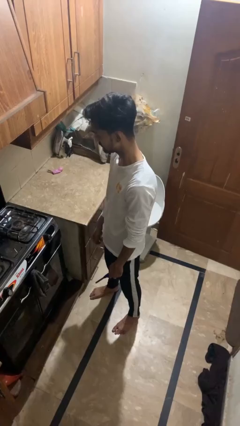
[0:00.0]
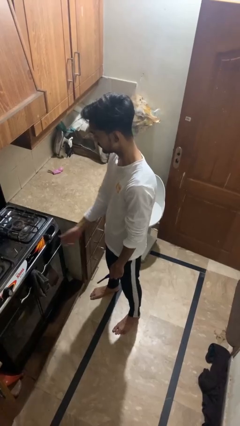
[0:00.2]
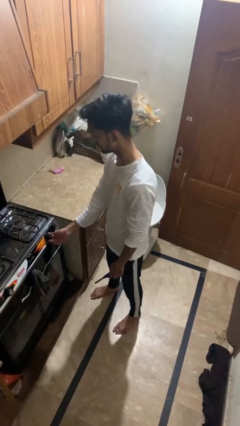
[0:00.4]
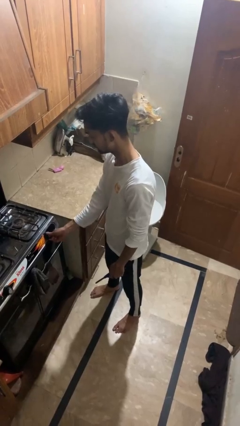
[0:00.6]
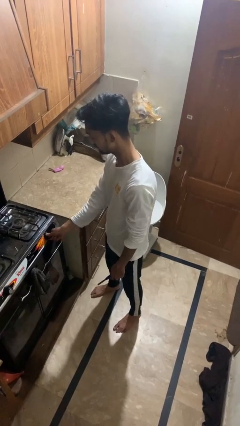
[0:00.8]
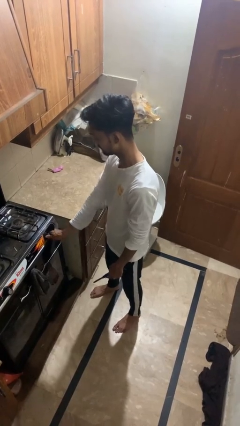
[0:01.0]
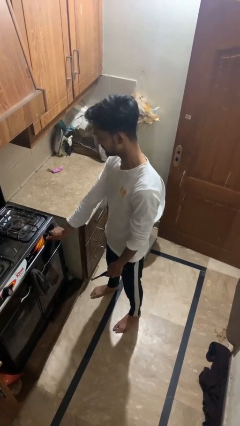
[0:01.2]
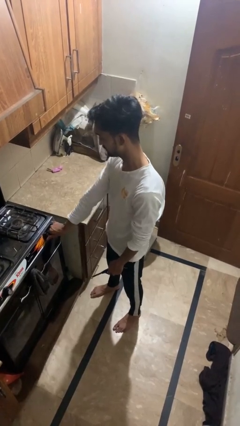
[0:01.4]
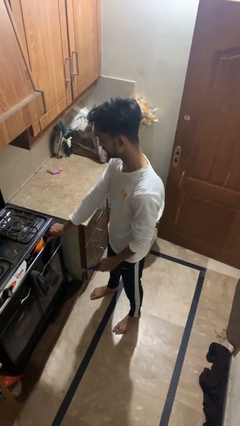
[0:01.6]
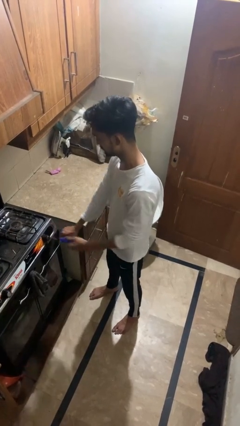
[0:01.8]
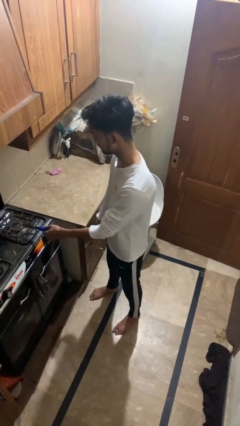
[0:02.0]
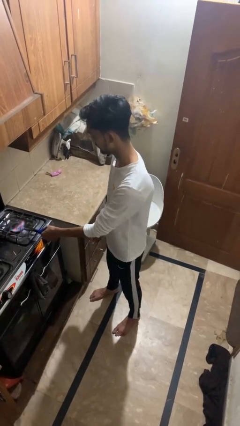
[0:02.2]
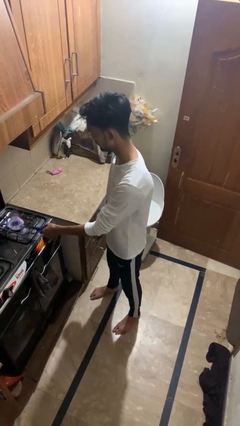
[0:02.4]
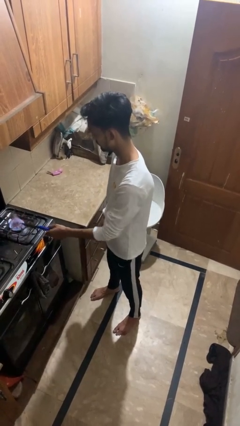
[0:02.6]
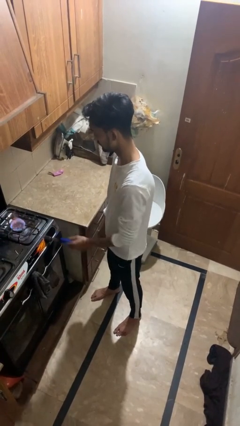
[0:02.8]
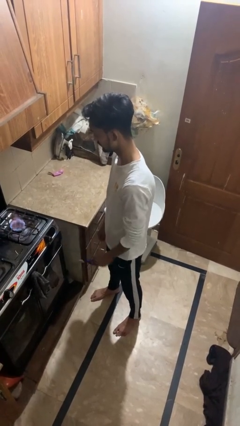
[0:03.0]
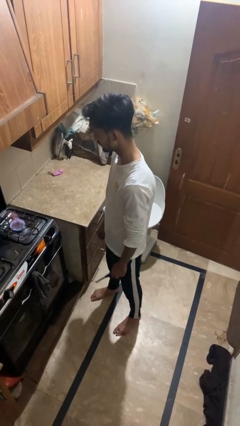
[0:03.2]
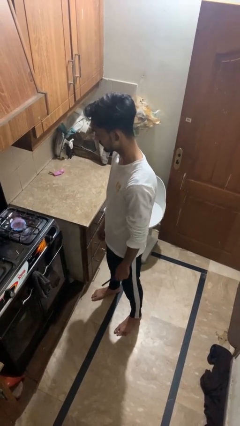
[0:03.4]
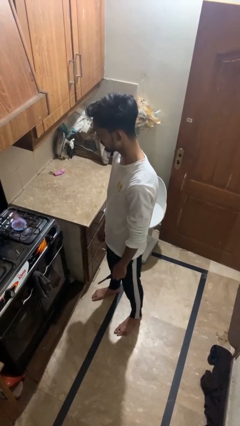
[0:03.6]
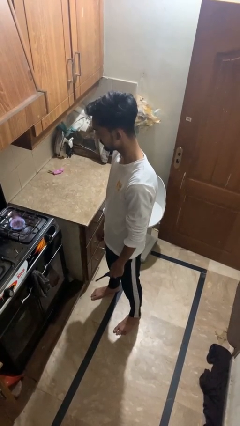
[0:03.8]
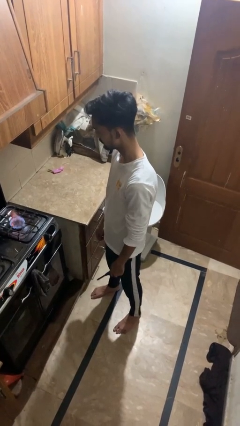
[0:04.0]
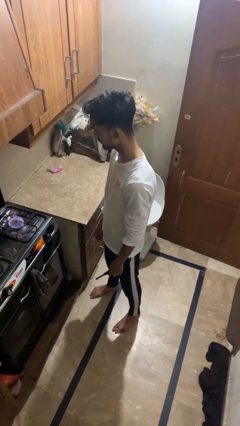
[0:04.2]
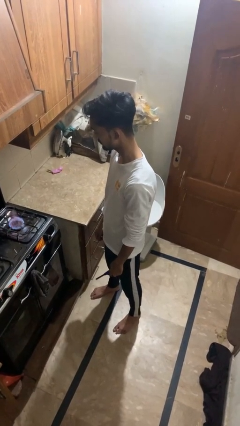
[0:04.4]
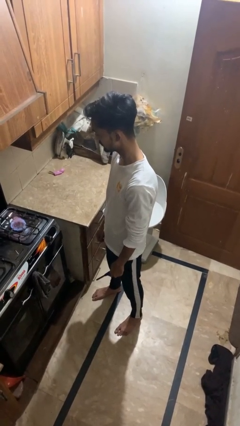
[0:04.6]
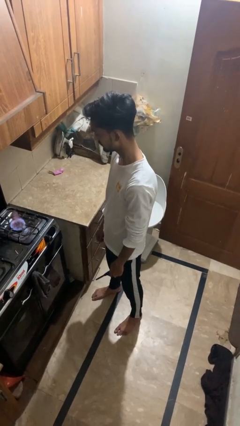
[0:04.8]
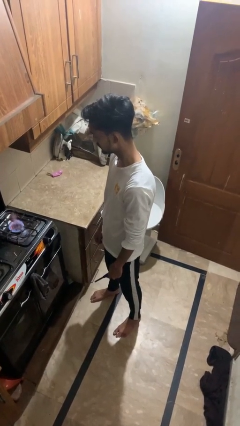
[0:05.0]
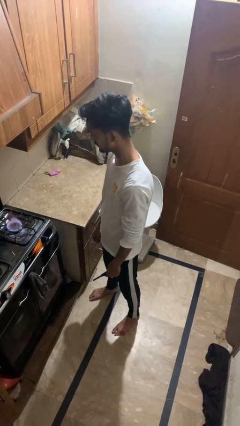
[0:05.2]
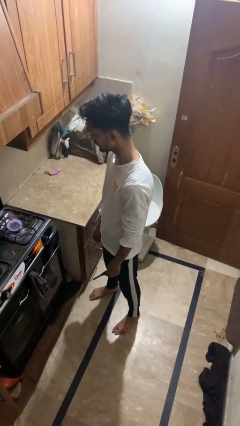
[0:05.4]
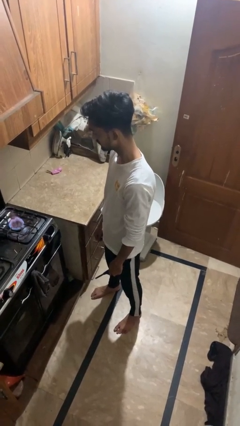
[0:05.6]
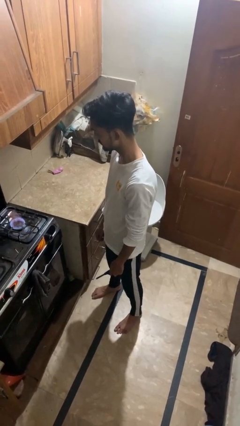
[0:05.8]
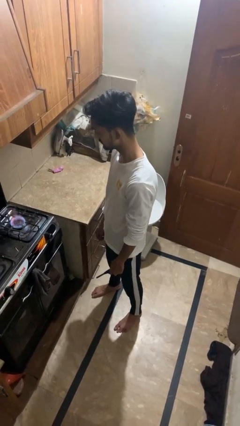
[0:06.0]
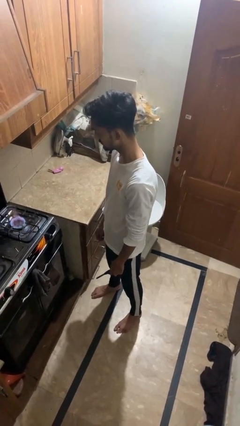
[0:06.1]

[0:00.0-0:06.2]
person turns on stovetop

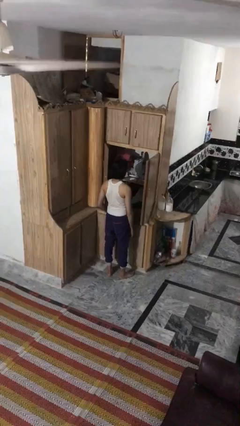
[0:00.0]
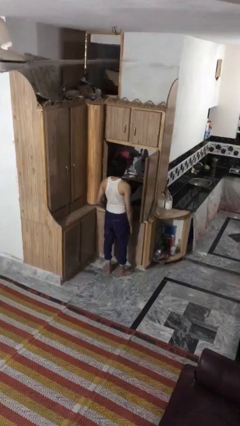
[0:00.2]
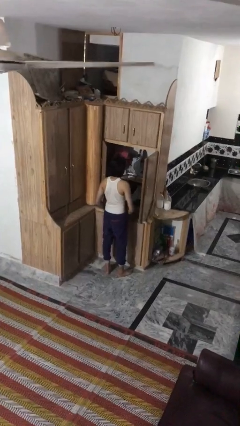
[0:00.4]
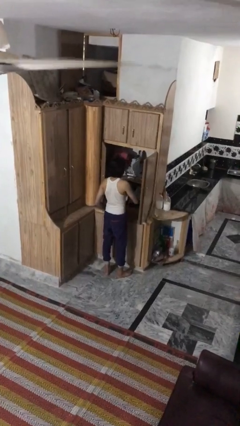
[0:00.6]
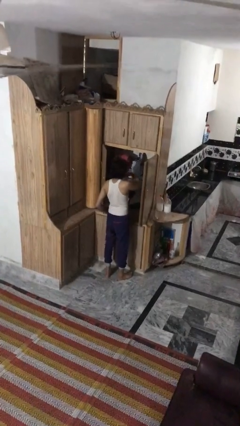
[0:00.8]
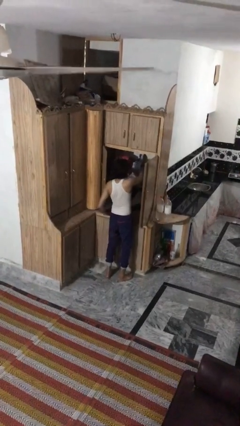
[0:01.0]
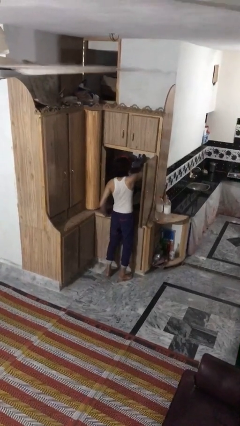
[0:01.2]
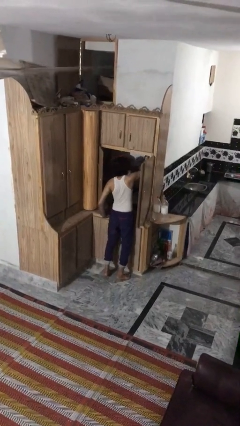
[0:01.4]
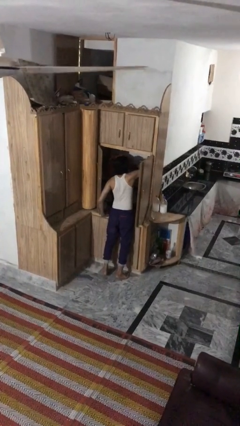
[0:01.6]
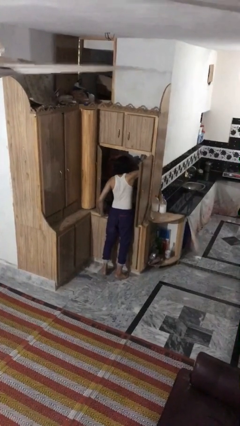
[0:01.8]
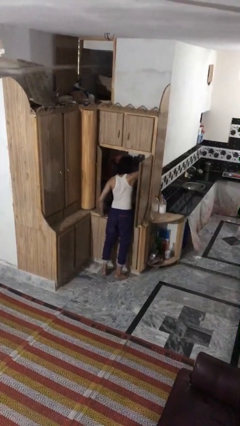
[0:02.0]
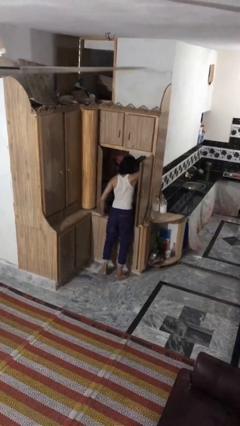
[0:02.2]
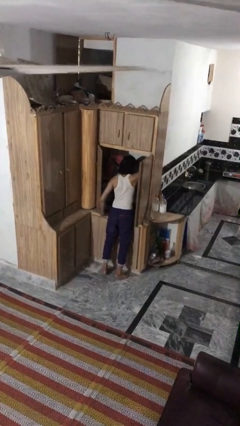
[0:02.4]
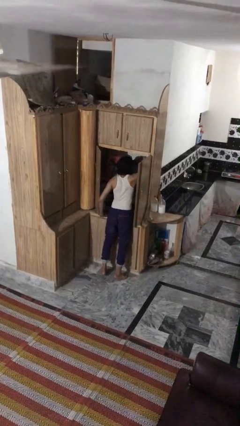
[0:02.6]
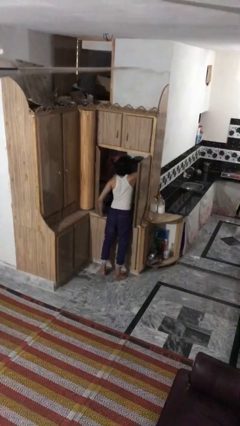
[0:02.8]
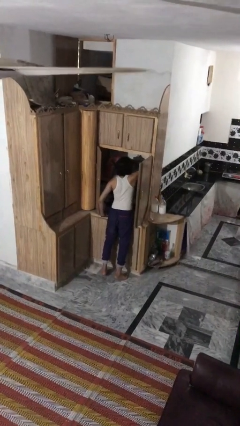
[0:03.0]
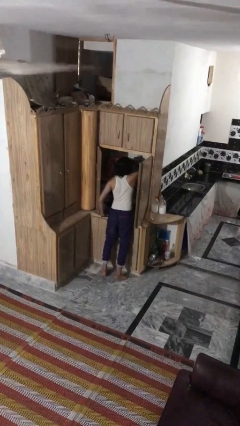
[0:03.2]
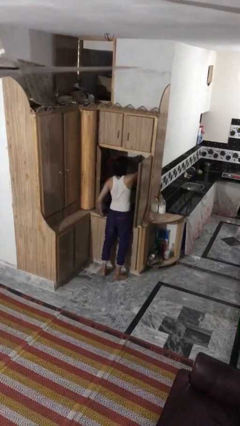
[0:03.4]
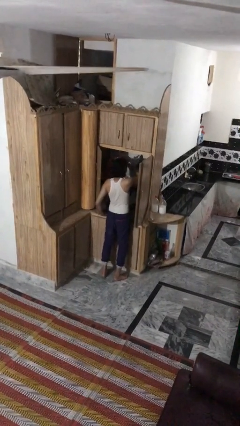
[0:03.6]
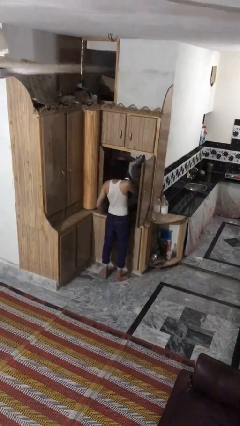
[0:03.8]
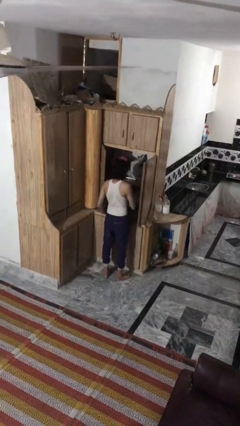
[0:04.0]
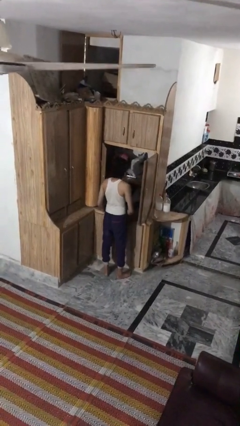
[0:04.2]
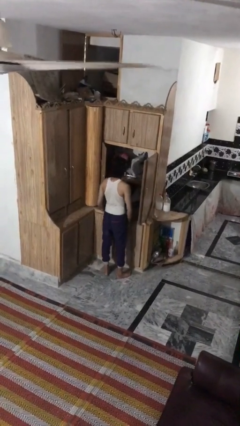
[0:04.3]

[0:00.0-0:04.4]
person searches in cabinet

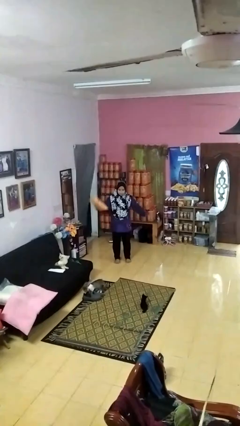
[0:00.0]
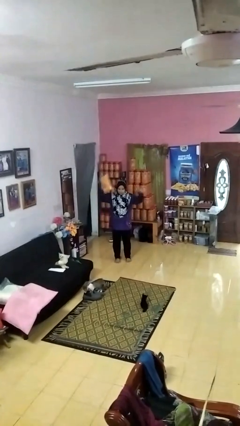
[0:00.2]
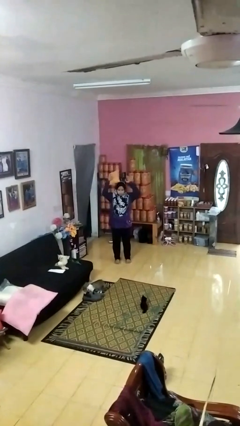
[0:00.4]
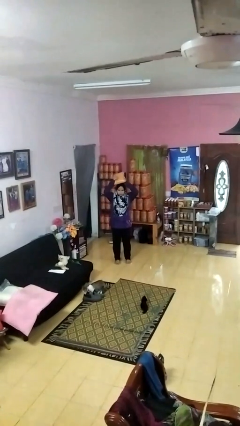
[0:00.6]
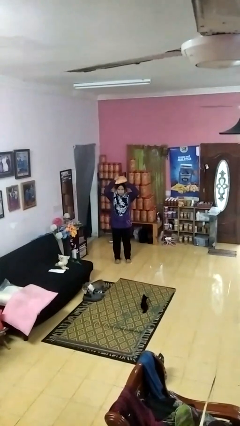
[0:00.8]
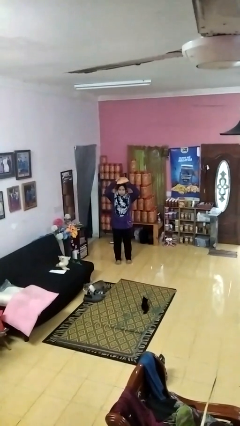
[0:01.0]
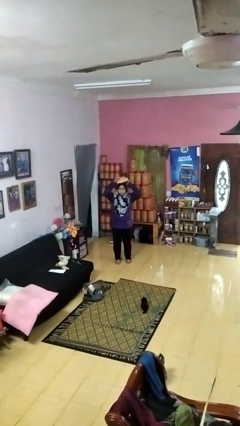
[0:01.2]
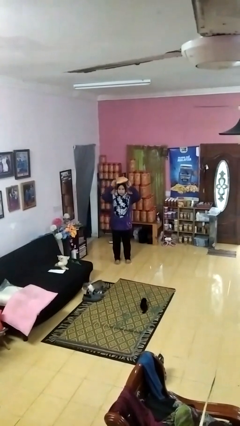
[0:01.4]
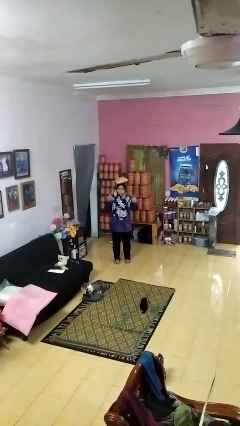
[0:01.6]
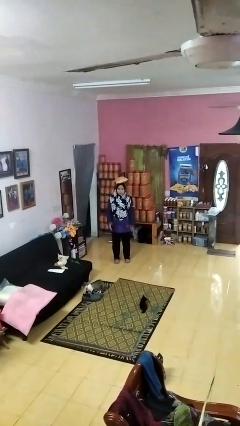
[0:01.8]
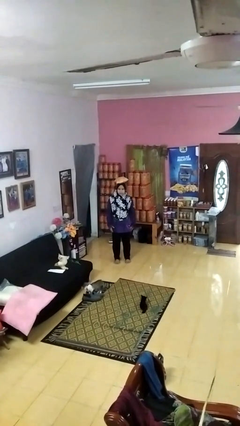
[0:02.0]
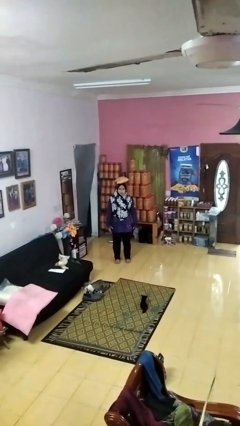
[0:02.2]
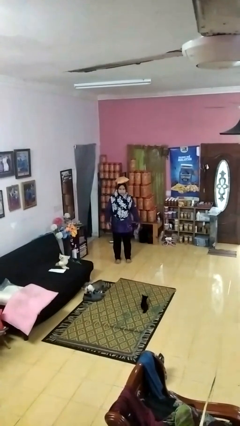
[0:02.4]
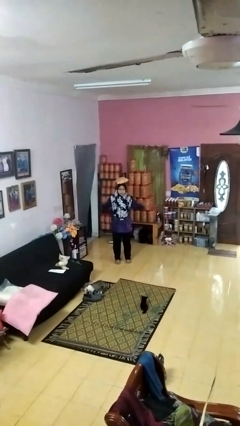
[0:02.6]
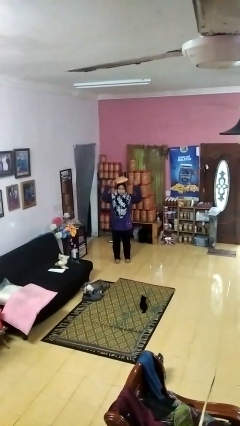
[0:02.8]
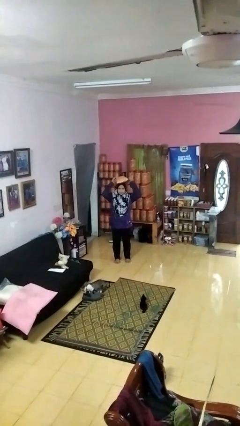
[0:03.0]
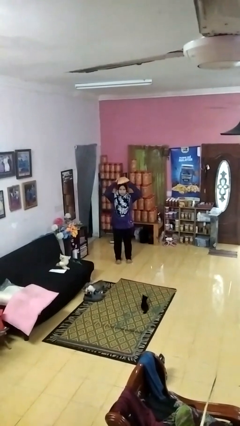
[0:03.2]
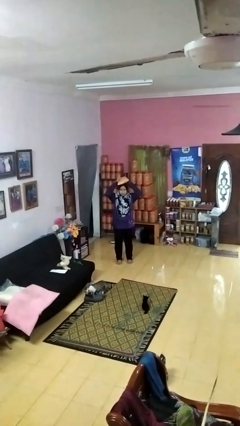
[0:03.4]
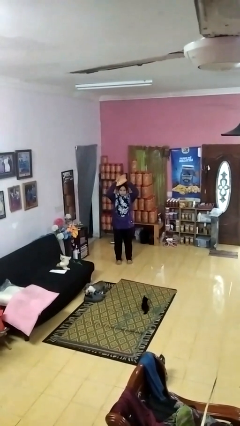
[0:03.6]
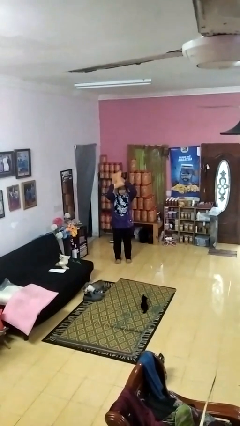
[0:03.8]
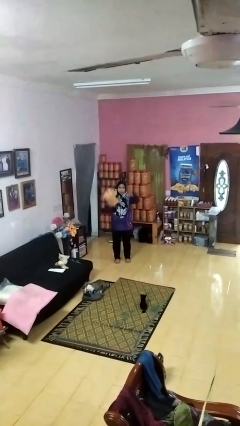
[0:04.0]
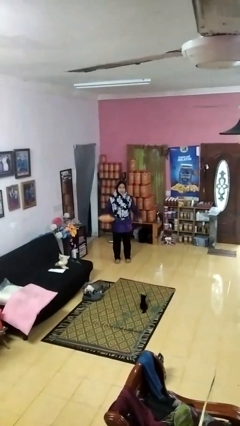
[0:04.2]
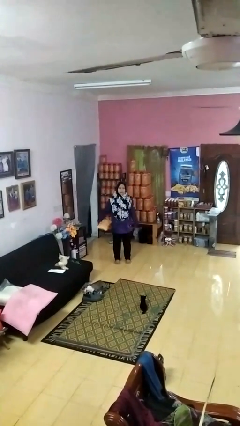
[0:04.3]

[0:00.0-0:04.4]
person holds object above head

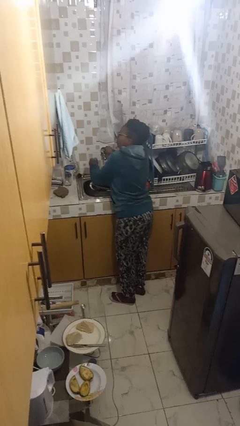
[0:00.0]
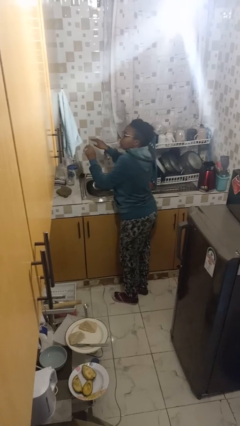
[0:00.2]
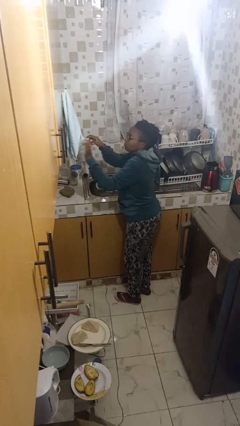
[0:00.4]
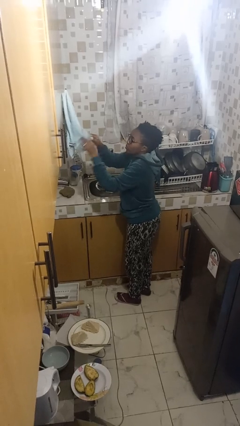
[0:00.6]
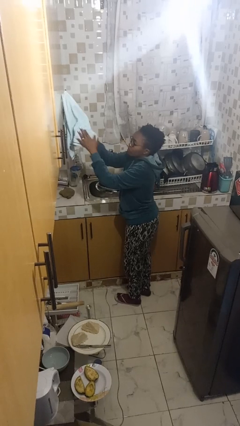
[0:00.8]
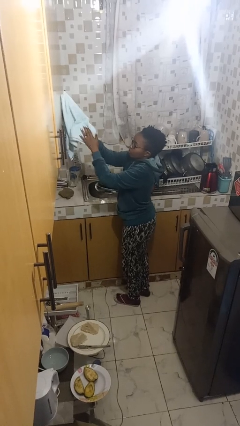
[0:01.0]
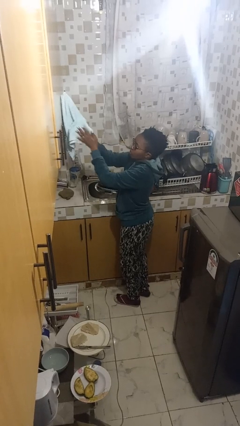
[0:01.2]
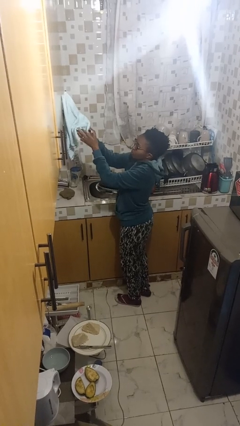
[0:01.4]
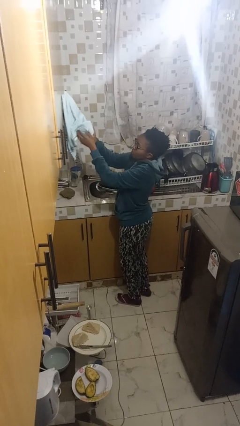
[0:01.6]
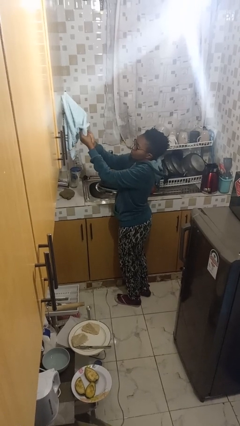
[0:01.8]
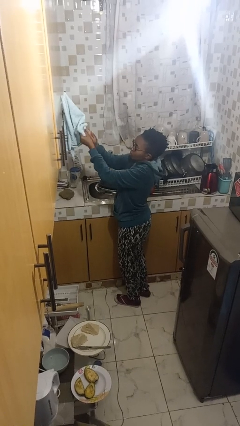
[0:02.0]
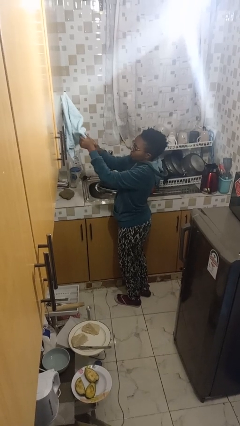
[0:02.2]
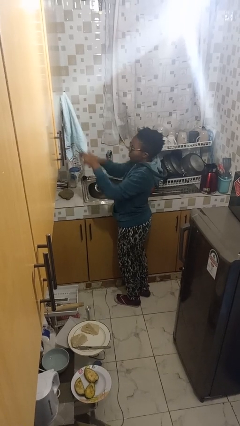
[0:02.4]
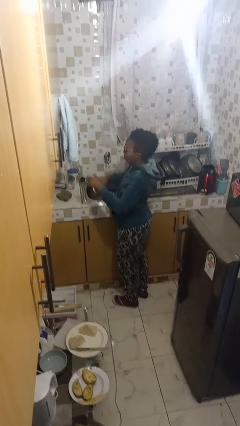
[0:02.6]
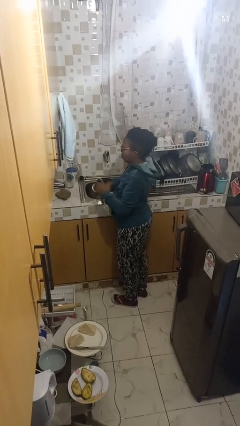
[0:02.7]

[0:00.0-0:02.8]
person dries hands with towel
